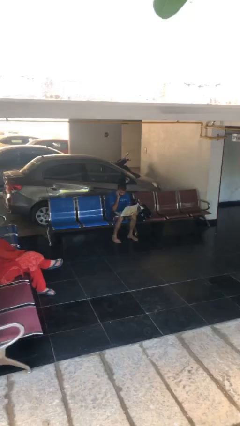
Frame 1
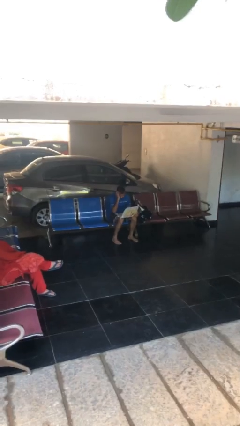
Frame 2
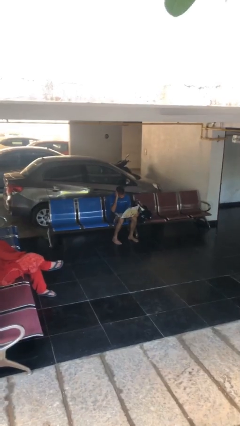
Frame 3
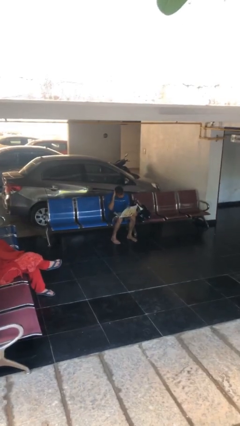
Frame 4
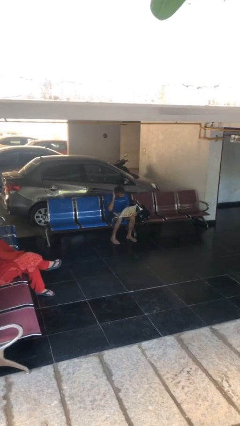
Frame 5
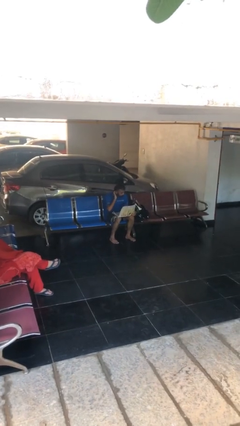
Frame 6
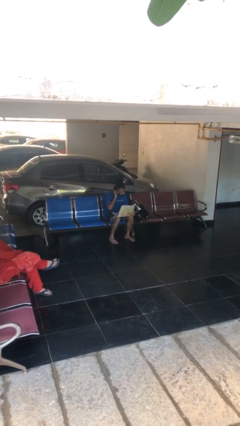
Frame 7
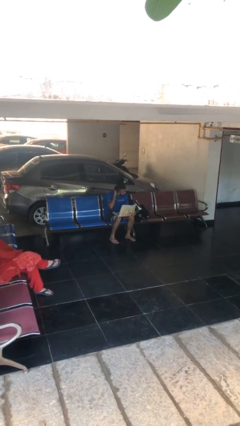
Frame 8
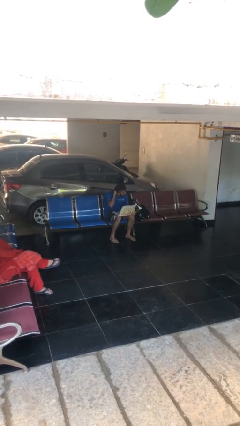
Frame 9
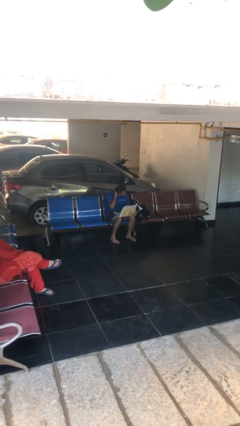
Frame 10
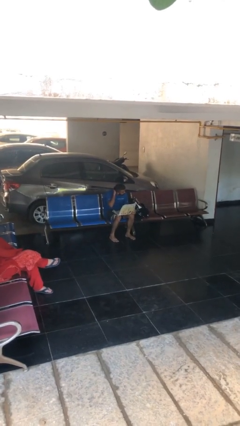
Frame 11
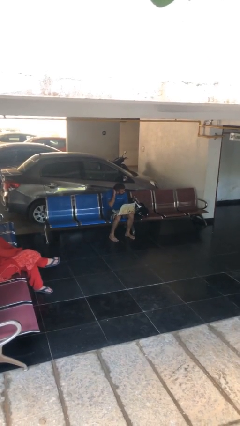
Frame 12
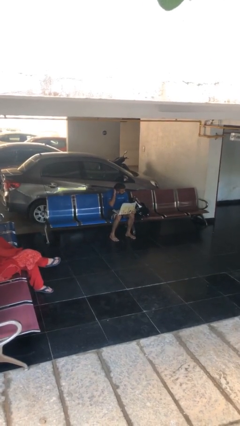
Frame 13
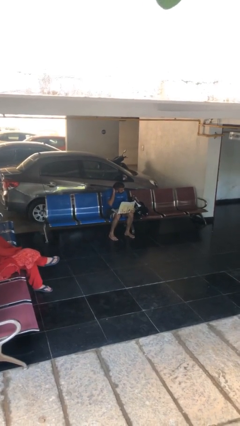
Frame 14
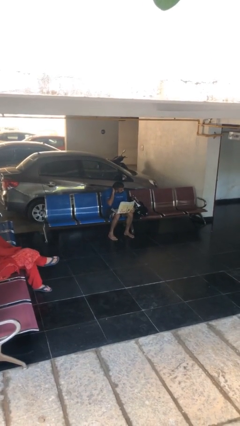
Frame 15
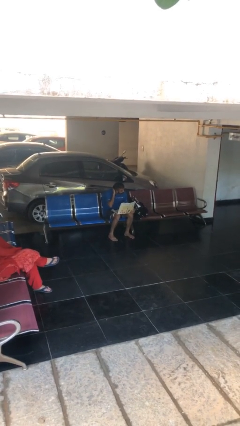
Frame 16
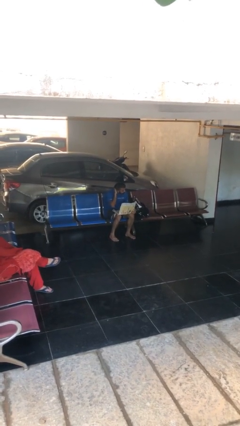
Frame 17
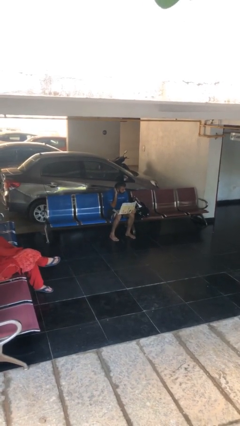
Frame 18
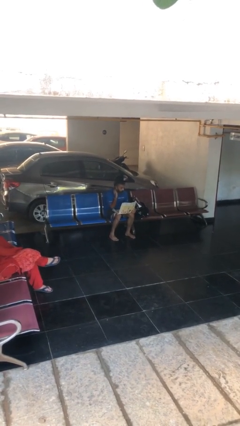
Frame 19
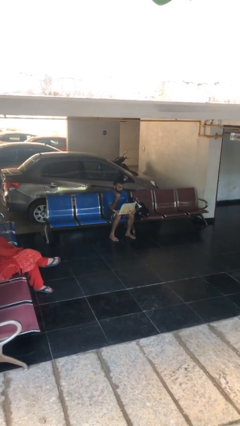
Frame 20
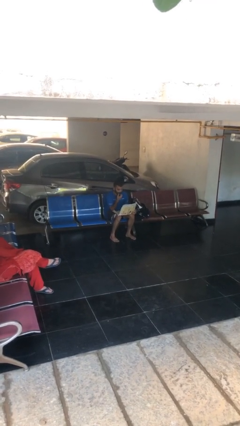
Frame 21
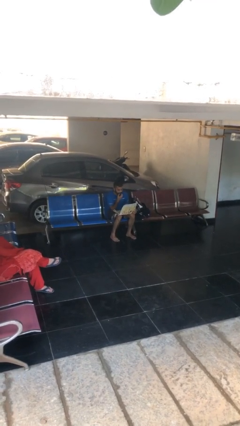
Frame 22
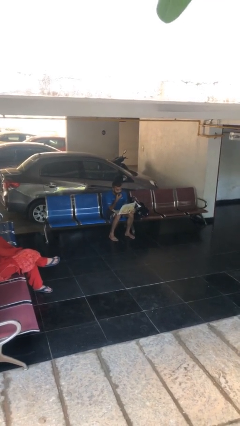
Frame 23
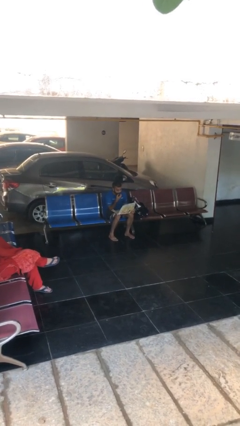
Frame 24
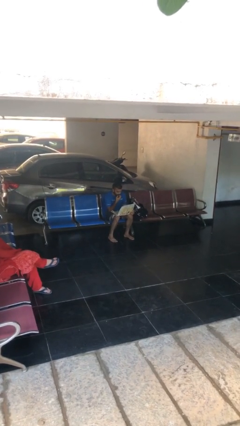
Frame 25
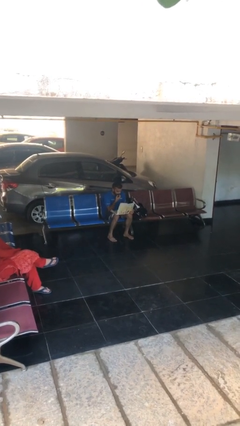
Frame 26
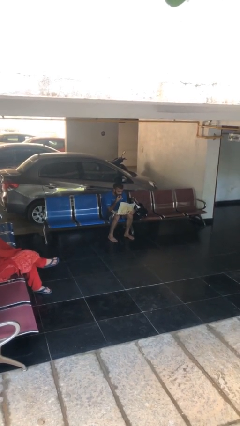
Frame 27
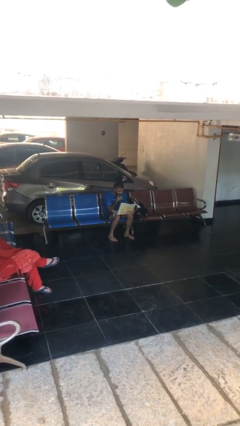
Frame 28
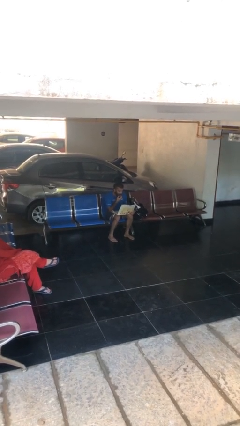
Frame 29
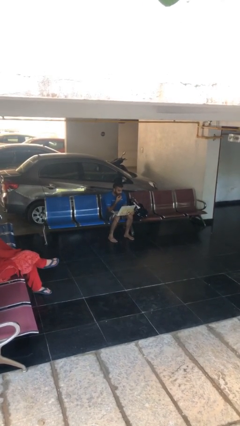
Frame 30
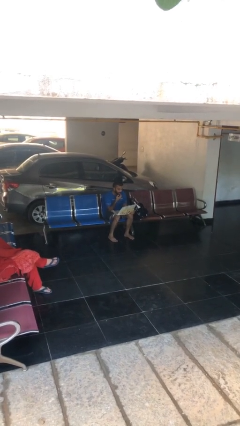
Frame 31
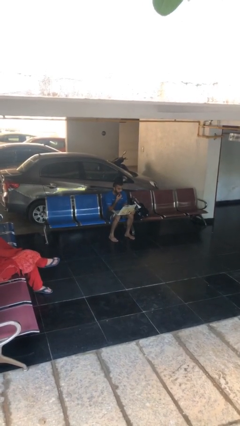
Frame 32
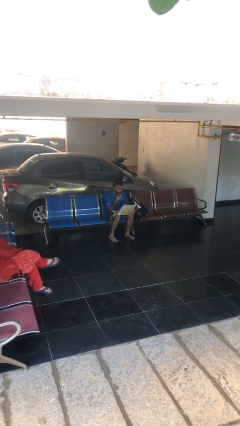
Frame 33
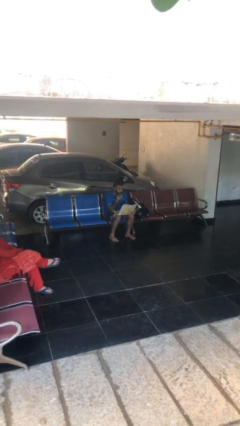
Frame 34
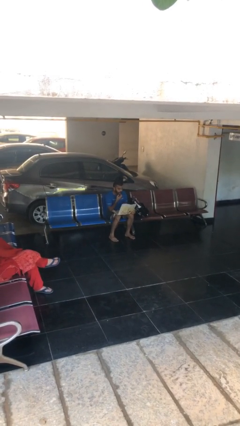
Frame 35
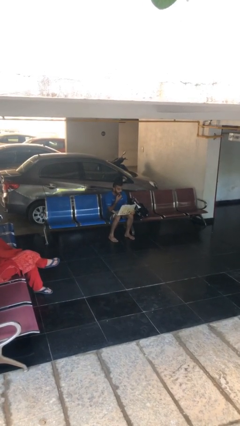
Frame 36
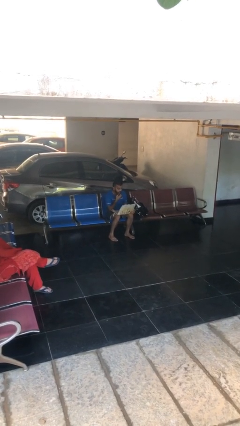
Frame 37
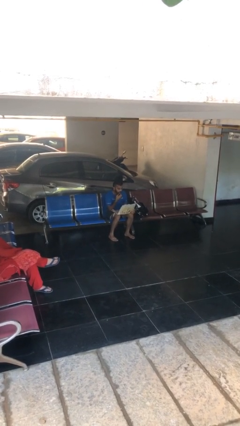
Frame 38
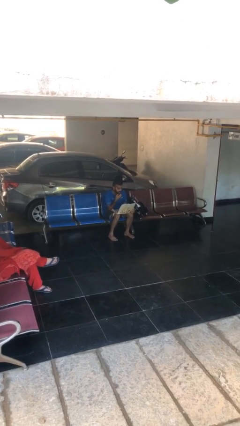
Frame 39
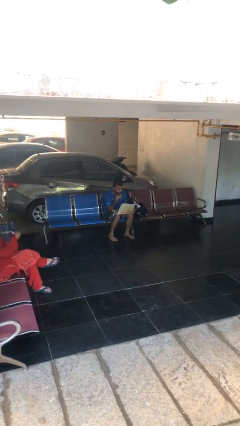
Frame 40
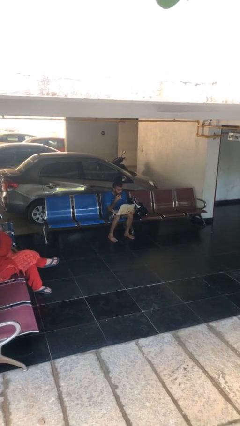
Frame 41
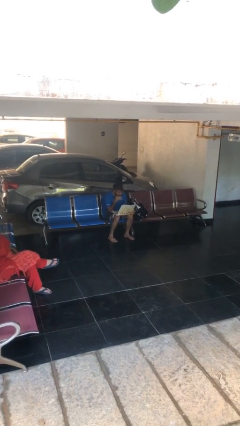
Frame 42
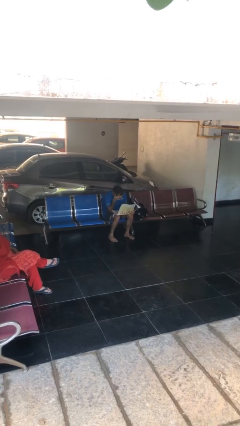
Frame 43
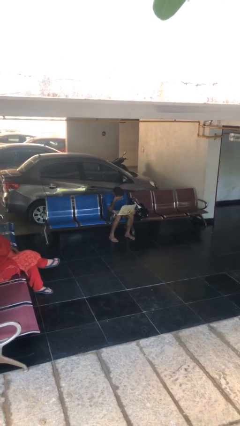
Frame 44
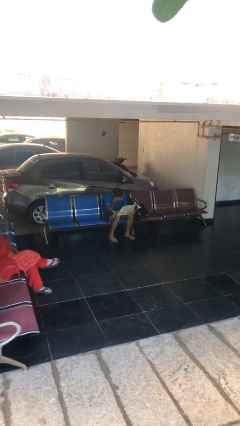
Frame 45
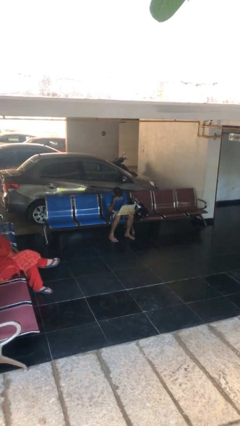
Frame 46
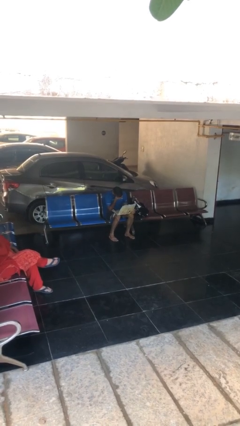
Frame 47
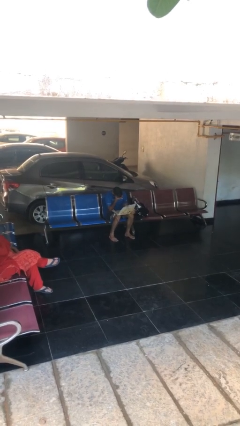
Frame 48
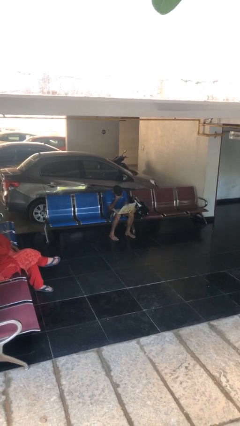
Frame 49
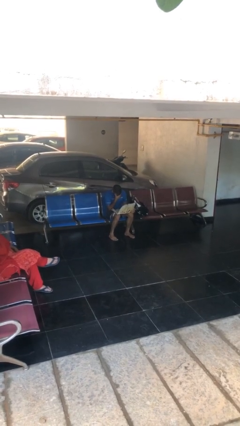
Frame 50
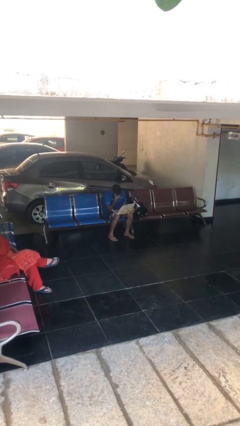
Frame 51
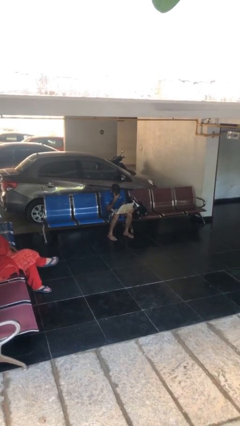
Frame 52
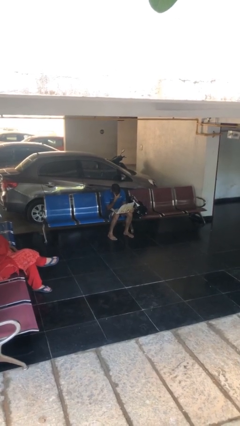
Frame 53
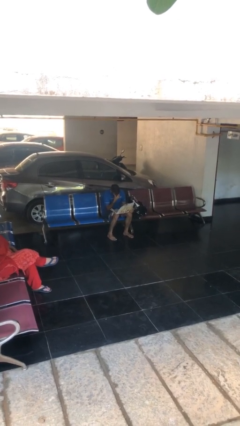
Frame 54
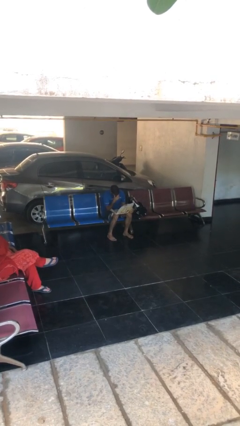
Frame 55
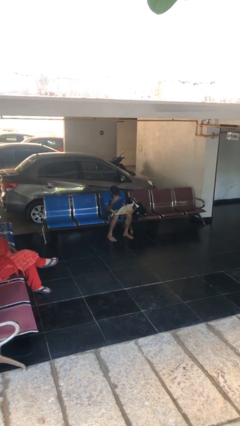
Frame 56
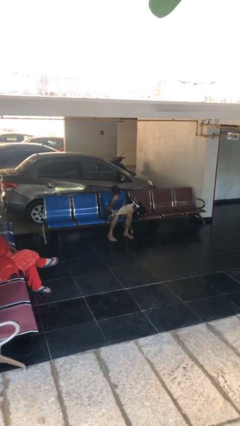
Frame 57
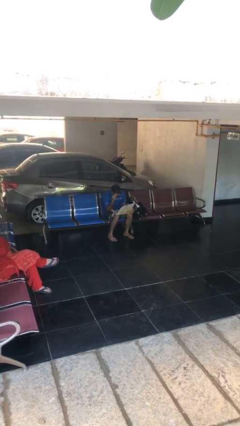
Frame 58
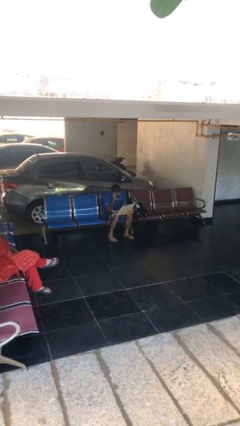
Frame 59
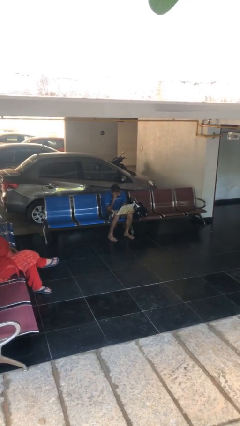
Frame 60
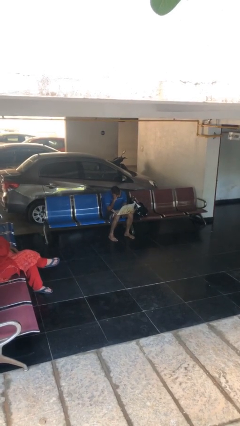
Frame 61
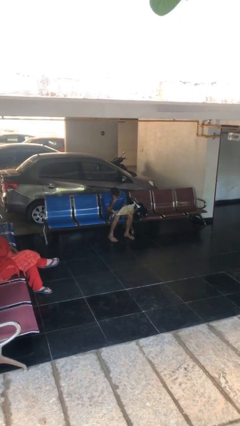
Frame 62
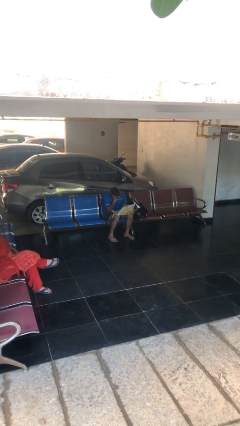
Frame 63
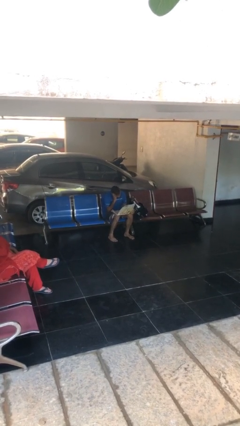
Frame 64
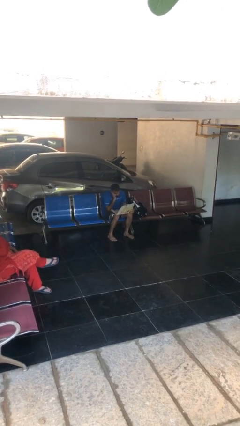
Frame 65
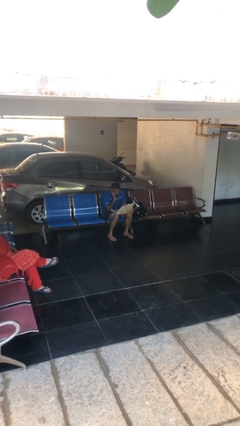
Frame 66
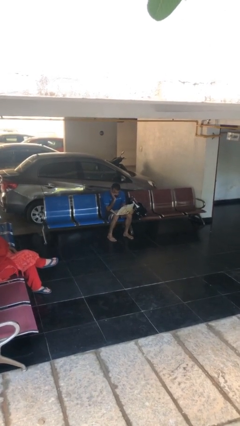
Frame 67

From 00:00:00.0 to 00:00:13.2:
person reads document

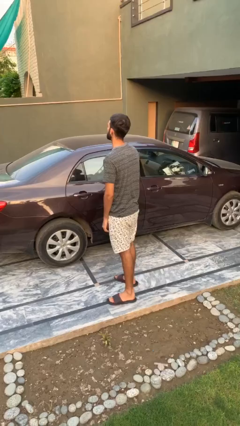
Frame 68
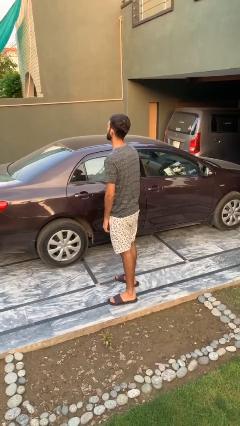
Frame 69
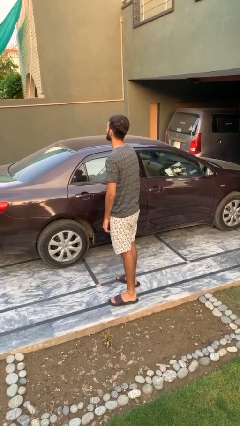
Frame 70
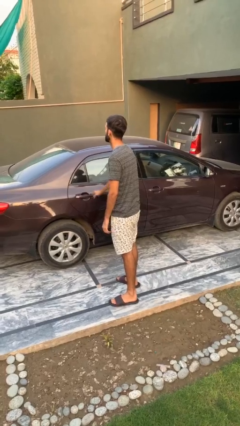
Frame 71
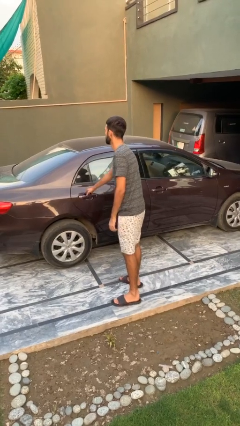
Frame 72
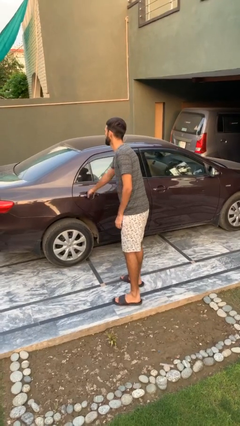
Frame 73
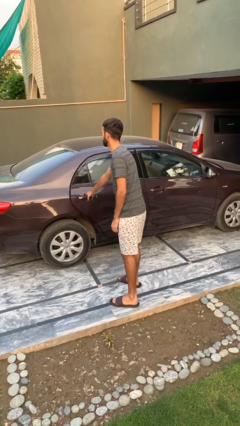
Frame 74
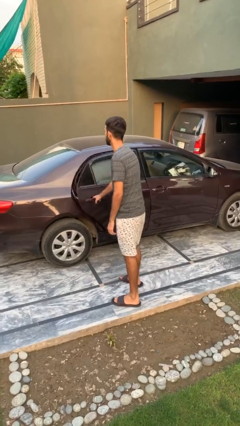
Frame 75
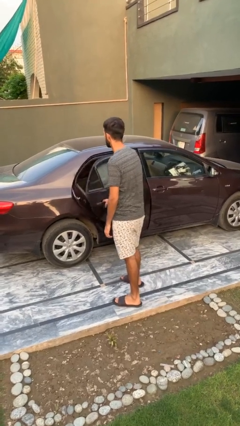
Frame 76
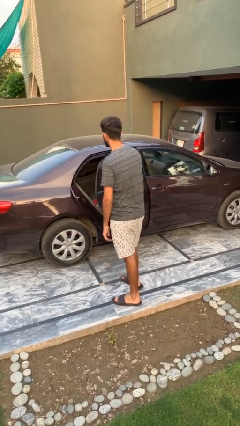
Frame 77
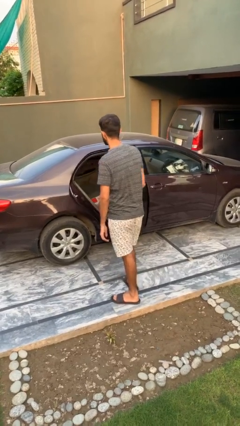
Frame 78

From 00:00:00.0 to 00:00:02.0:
person opens car door

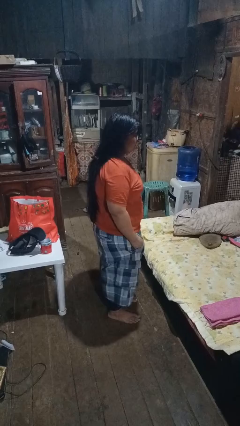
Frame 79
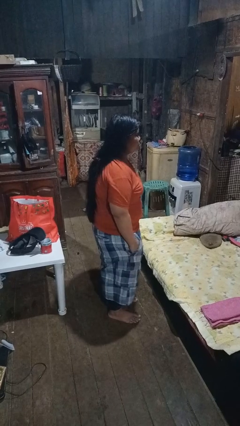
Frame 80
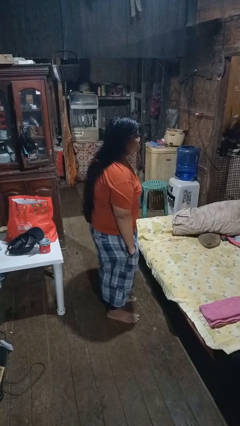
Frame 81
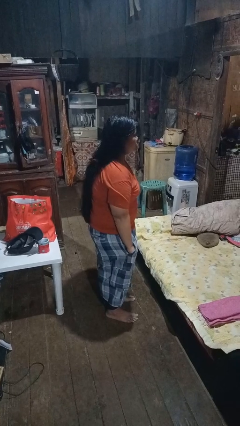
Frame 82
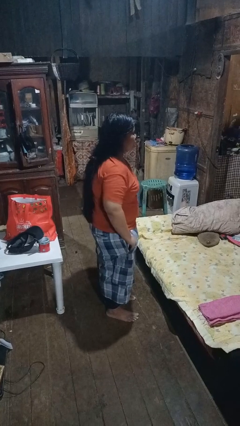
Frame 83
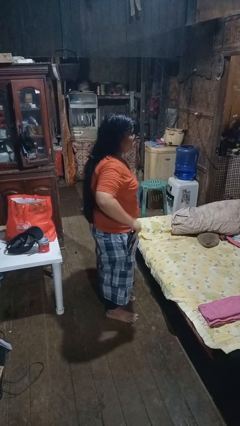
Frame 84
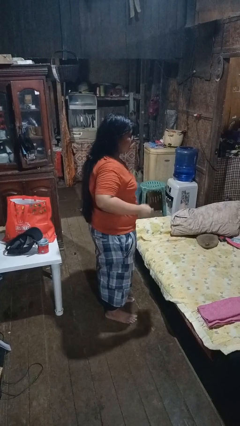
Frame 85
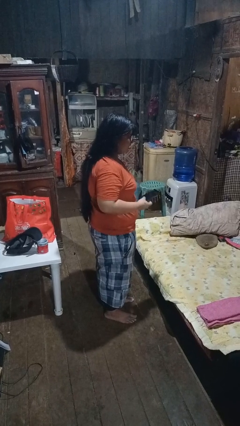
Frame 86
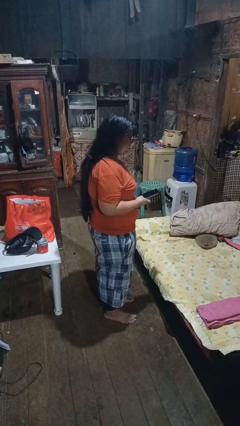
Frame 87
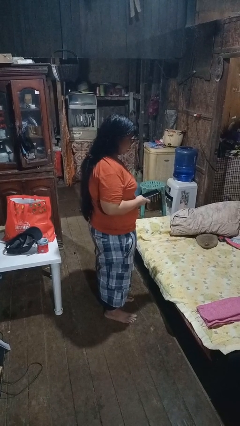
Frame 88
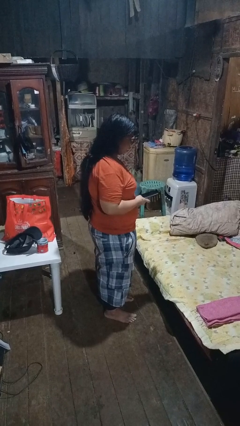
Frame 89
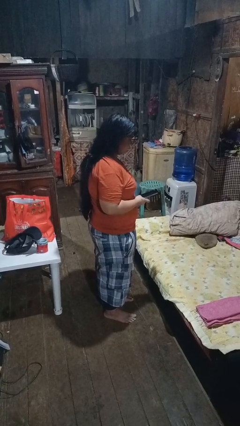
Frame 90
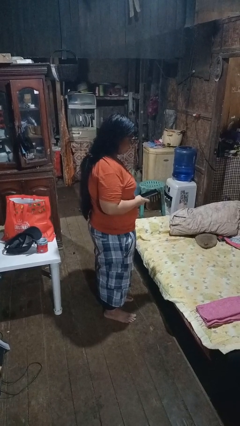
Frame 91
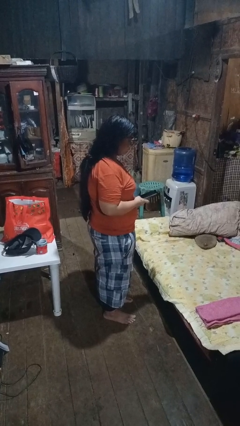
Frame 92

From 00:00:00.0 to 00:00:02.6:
person takes phone from pocket
